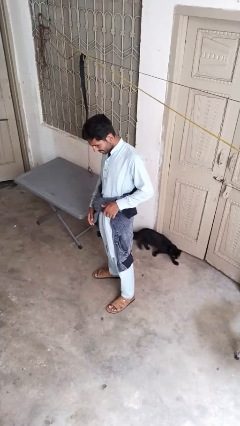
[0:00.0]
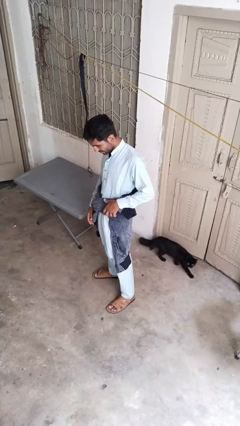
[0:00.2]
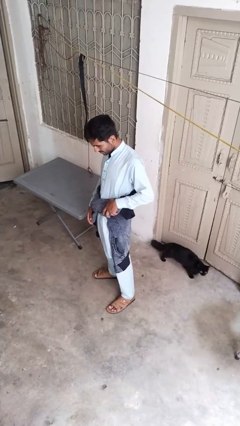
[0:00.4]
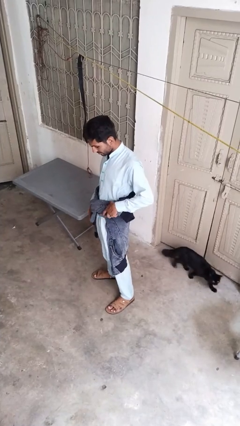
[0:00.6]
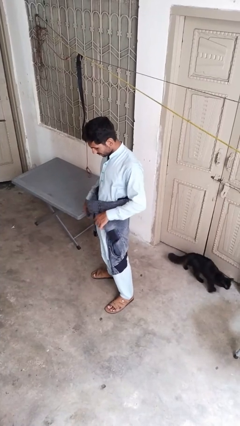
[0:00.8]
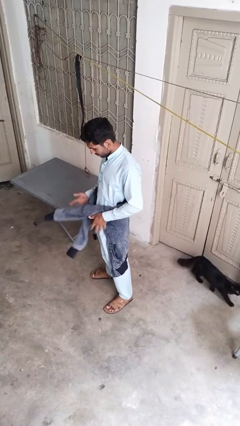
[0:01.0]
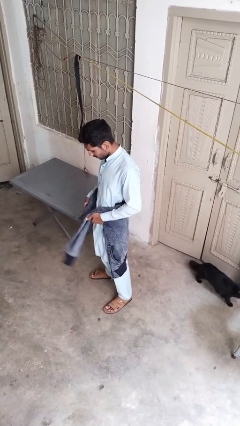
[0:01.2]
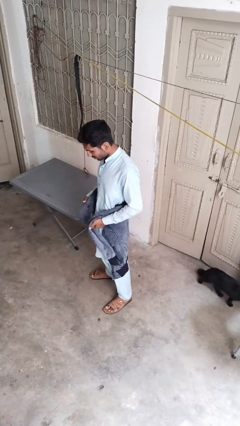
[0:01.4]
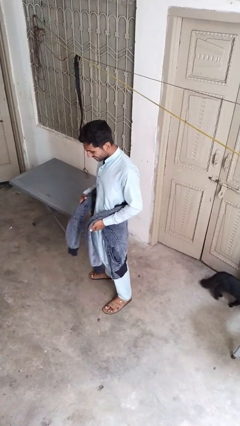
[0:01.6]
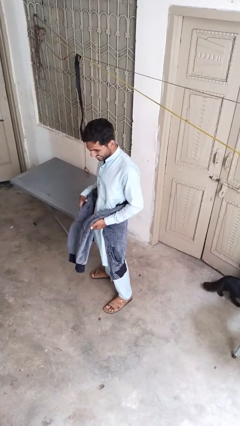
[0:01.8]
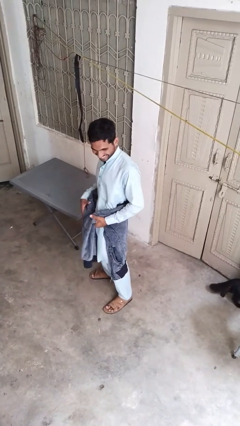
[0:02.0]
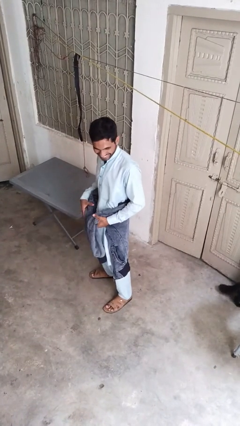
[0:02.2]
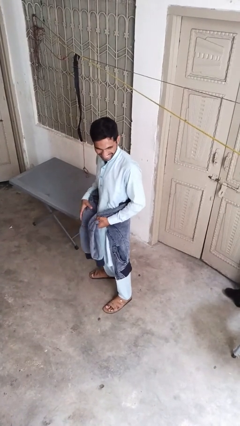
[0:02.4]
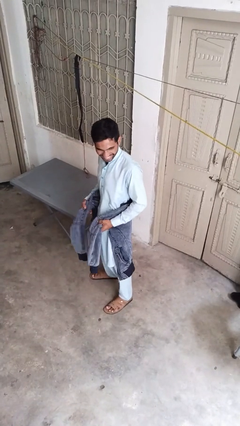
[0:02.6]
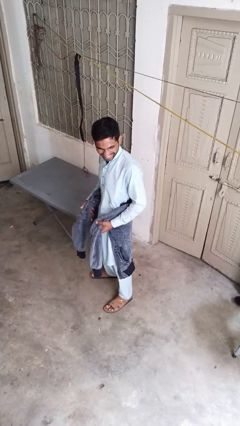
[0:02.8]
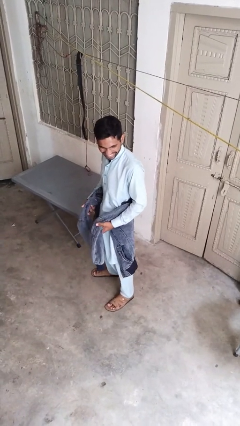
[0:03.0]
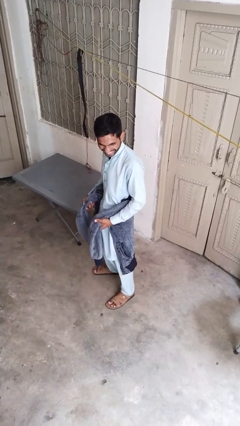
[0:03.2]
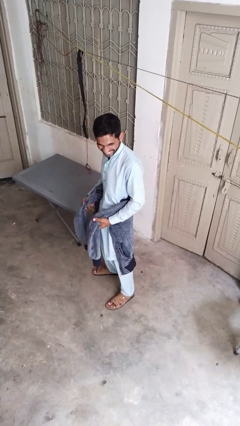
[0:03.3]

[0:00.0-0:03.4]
person unties jacket around waist

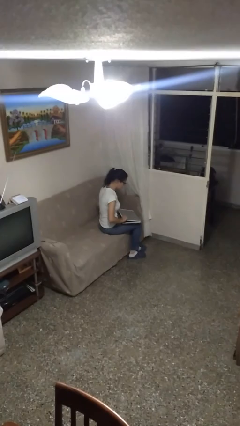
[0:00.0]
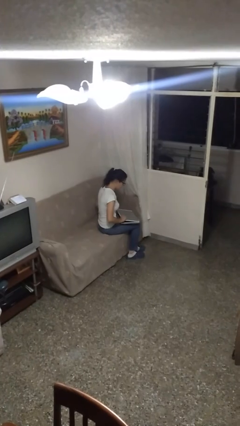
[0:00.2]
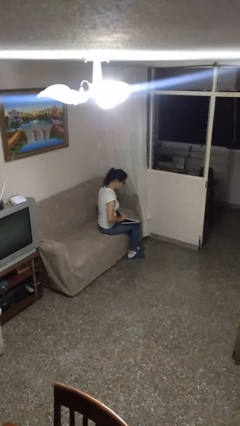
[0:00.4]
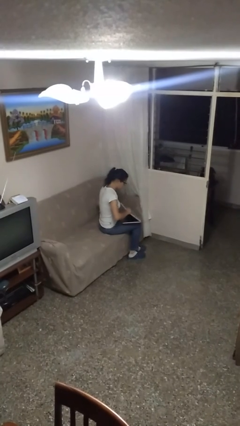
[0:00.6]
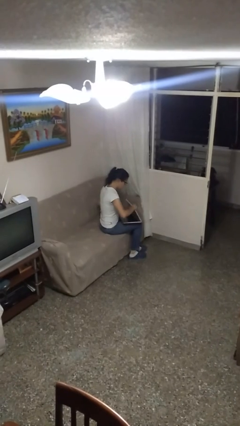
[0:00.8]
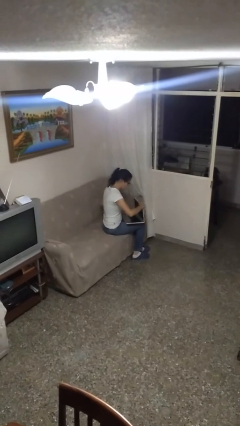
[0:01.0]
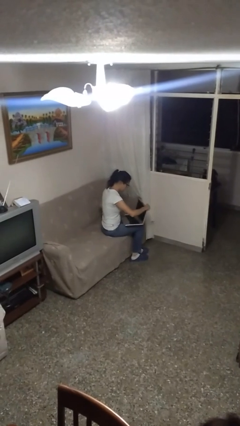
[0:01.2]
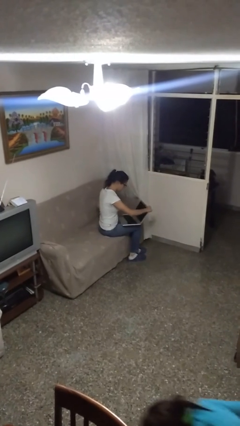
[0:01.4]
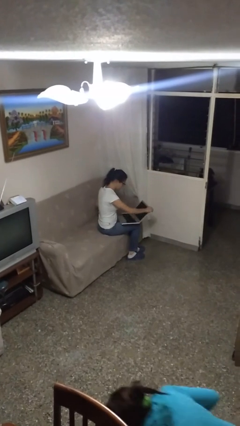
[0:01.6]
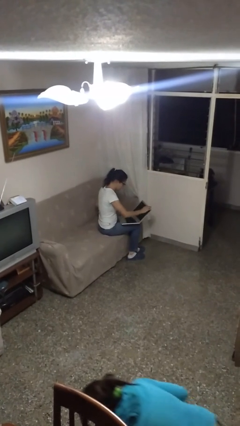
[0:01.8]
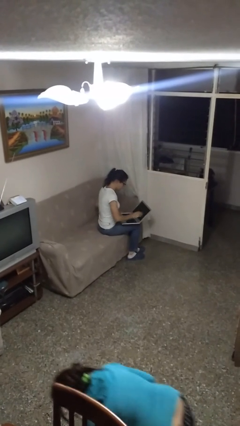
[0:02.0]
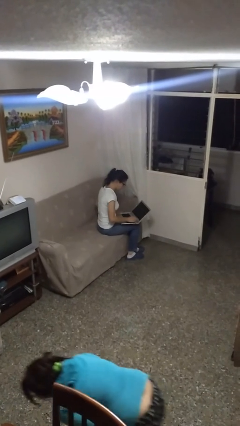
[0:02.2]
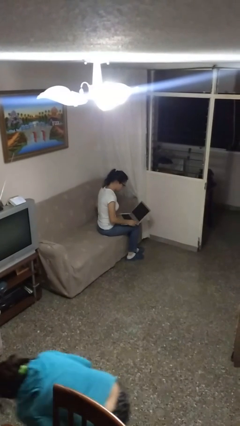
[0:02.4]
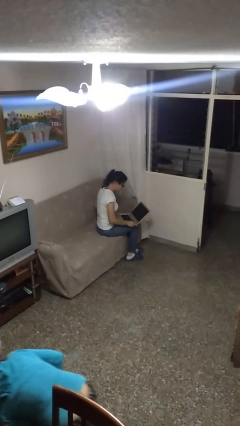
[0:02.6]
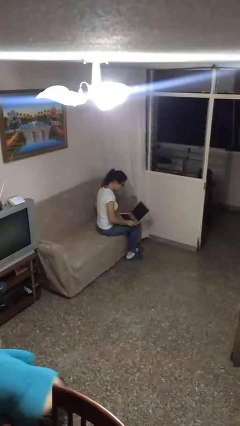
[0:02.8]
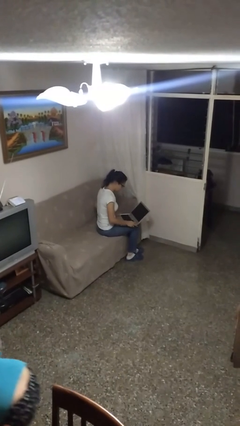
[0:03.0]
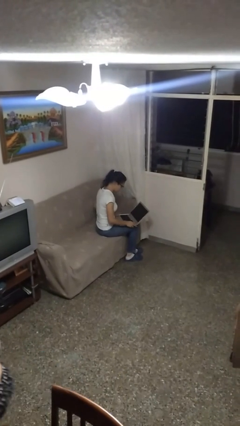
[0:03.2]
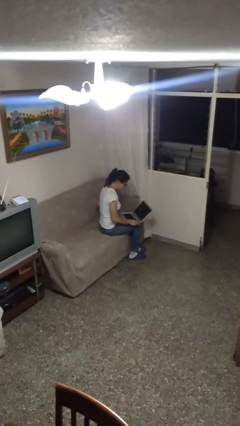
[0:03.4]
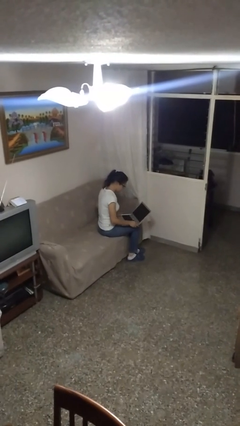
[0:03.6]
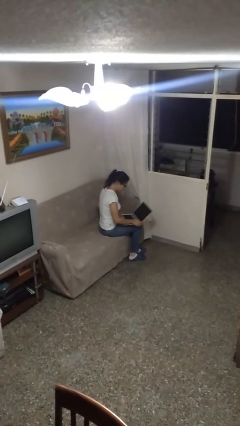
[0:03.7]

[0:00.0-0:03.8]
person opens laptop

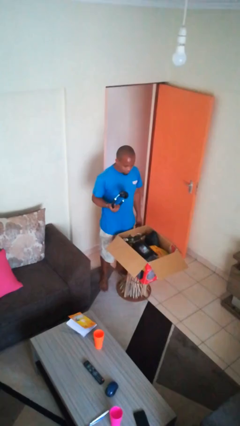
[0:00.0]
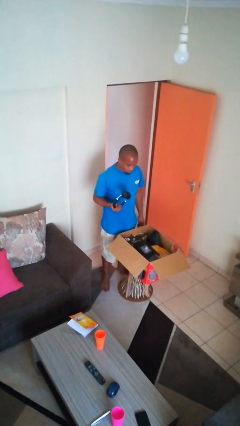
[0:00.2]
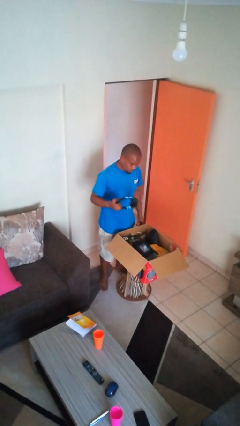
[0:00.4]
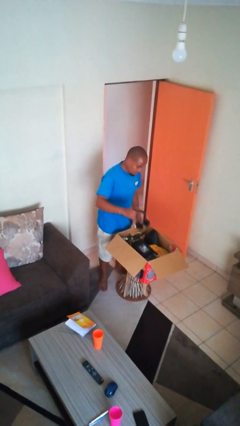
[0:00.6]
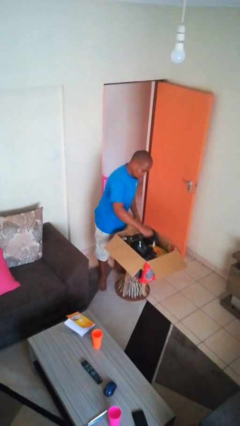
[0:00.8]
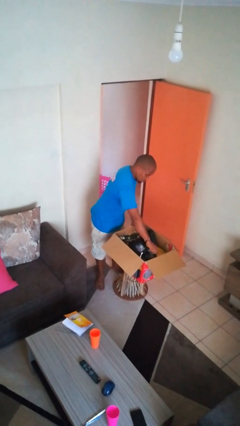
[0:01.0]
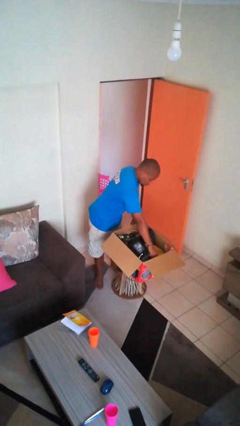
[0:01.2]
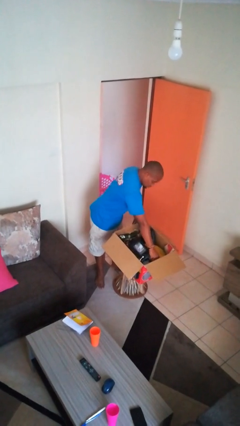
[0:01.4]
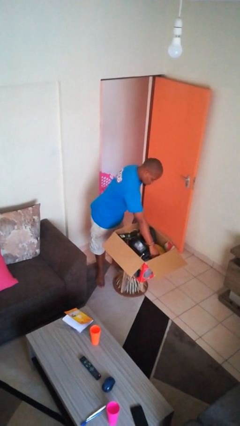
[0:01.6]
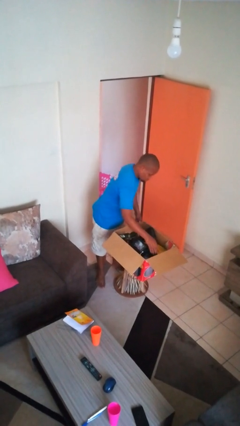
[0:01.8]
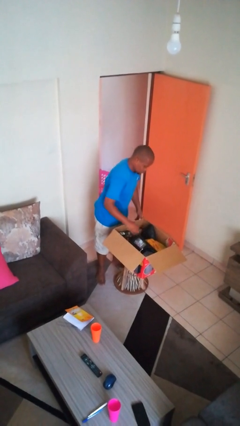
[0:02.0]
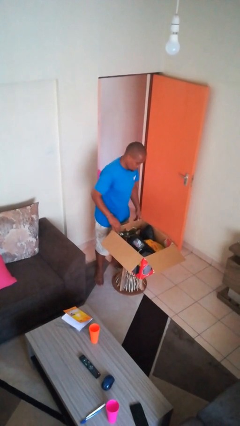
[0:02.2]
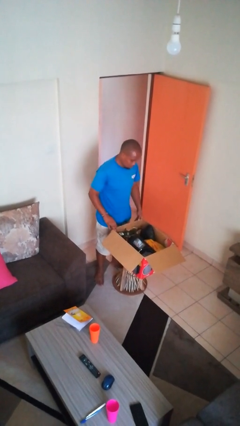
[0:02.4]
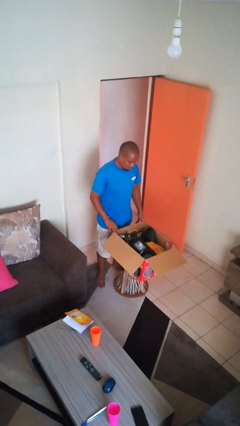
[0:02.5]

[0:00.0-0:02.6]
person puts object into box

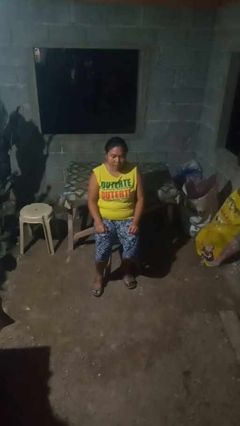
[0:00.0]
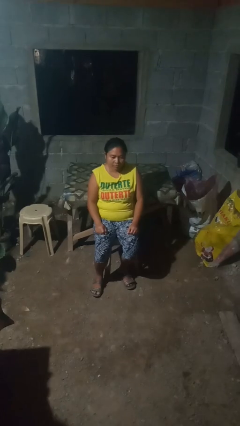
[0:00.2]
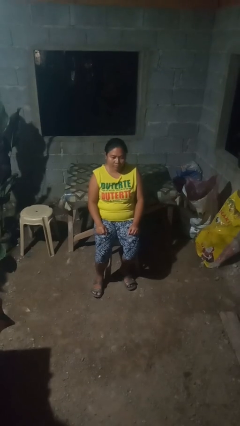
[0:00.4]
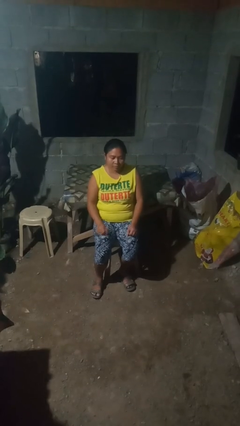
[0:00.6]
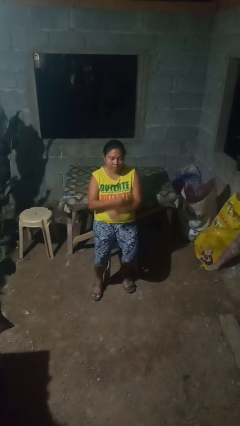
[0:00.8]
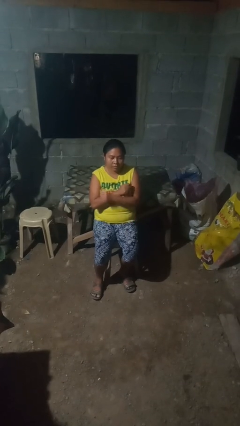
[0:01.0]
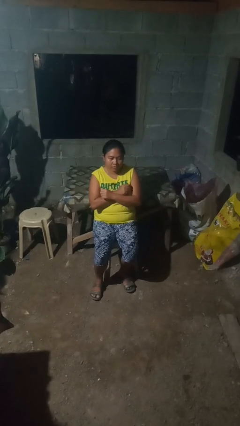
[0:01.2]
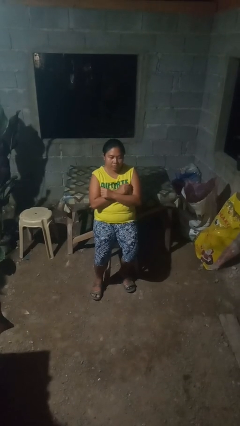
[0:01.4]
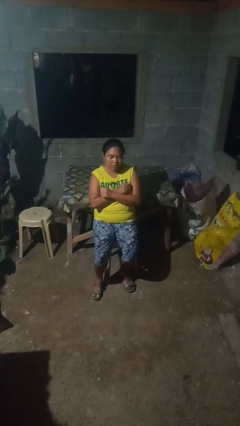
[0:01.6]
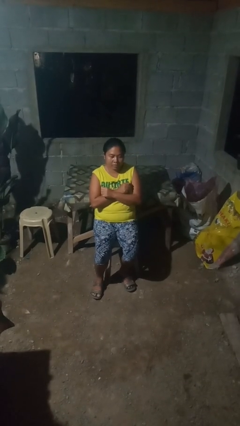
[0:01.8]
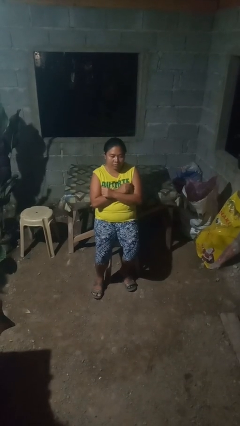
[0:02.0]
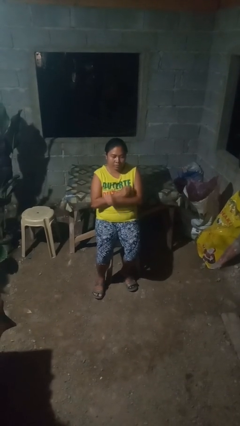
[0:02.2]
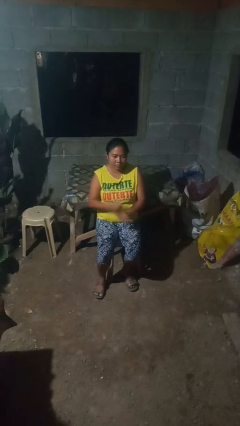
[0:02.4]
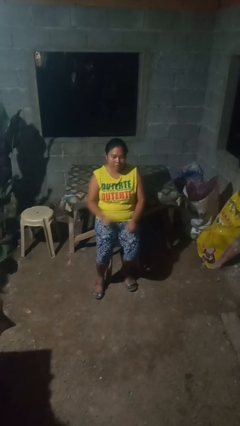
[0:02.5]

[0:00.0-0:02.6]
person crosses arms

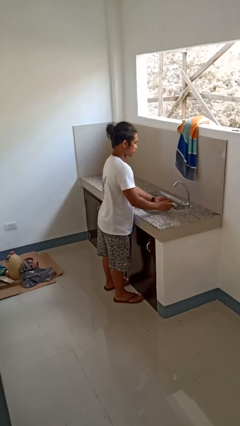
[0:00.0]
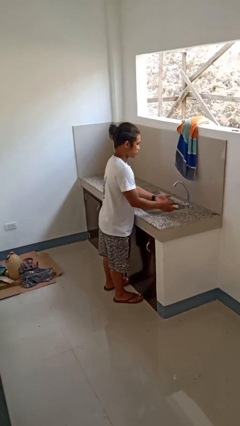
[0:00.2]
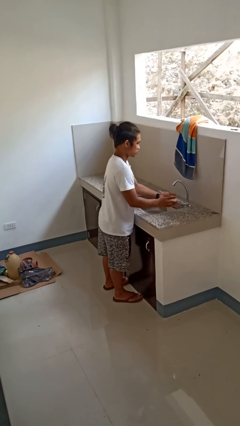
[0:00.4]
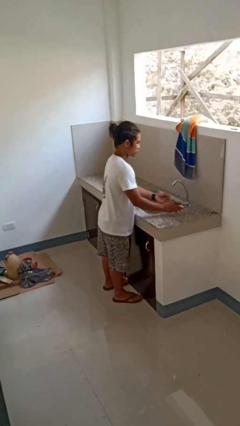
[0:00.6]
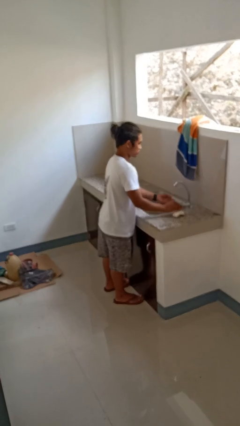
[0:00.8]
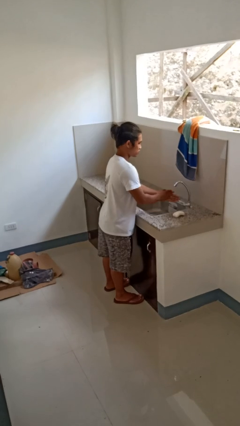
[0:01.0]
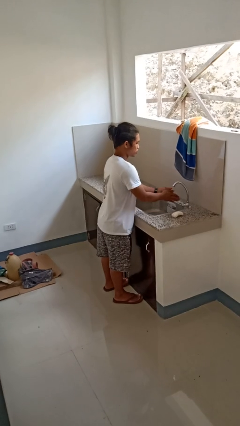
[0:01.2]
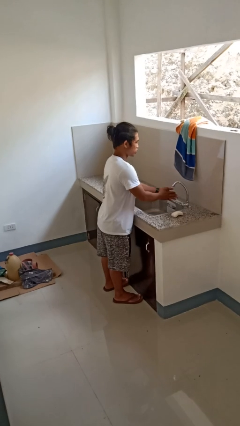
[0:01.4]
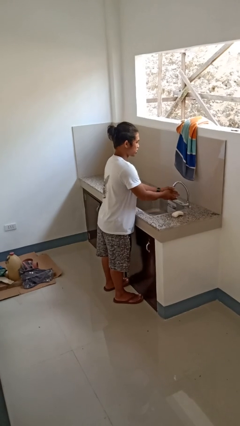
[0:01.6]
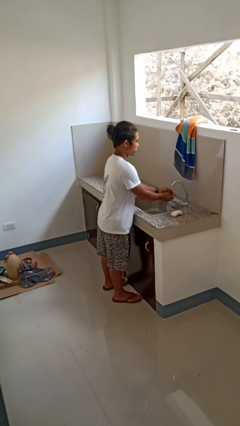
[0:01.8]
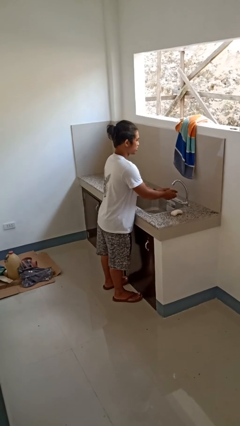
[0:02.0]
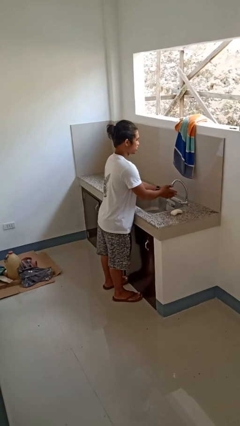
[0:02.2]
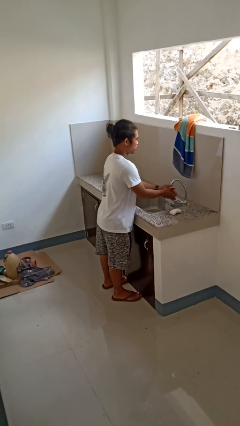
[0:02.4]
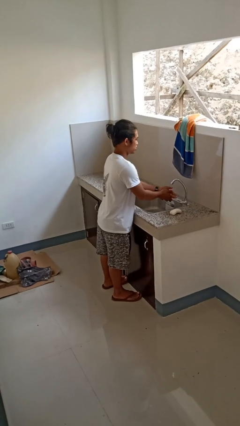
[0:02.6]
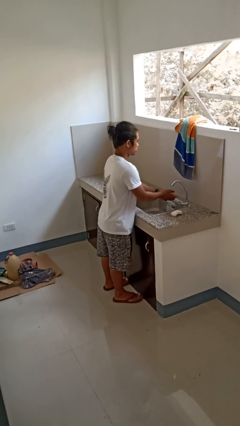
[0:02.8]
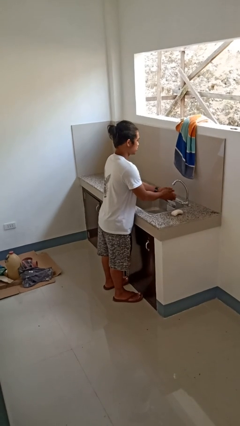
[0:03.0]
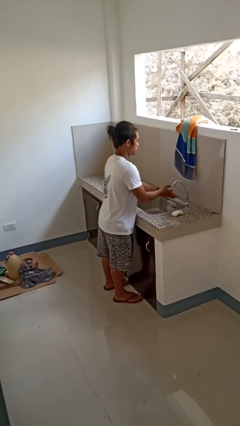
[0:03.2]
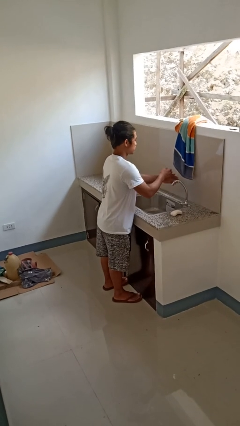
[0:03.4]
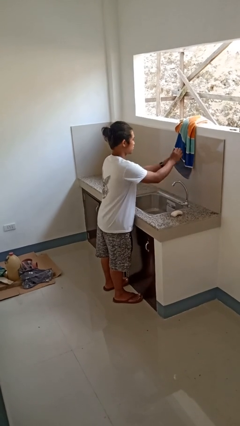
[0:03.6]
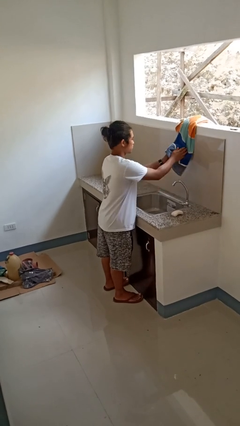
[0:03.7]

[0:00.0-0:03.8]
person washes hands

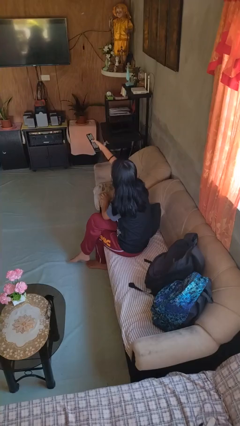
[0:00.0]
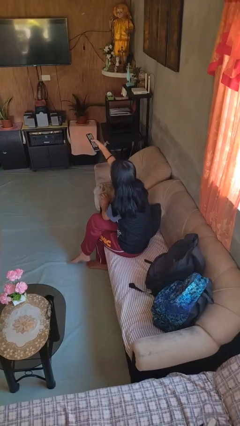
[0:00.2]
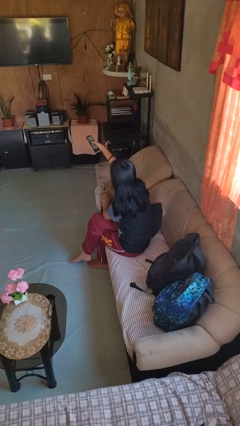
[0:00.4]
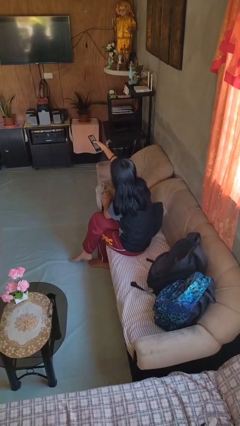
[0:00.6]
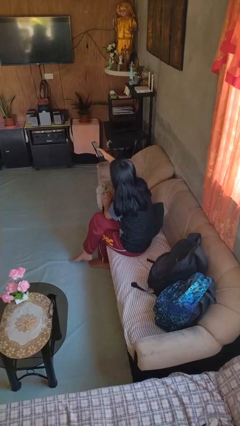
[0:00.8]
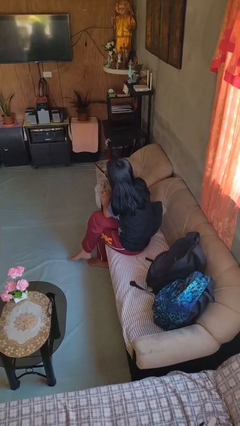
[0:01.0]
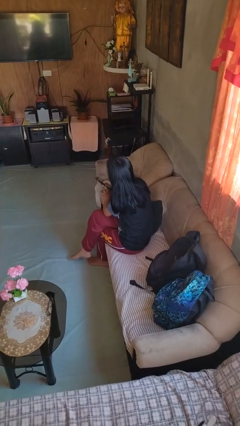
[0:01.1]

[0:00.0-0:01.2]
person uses television remote
